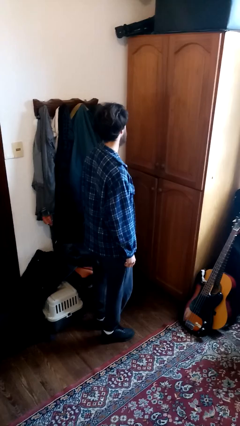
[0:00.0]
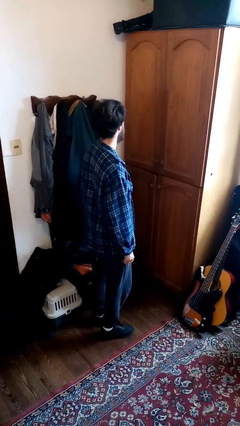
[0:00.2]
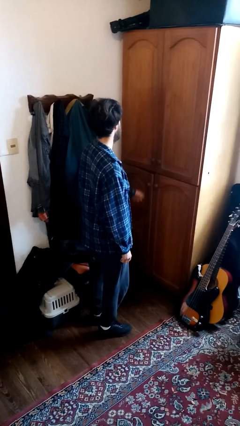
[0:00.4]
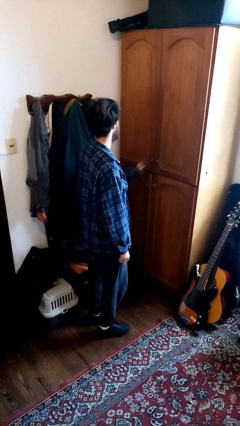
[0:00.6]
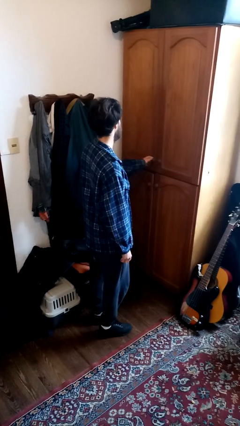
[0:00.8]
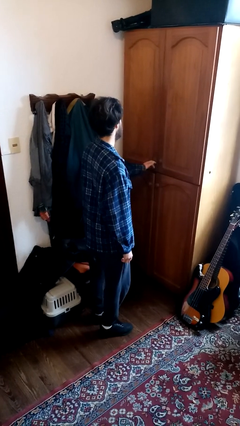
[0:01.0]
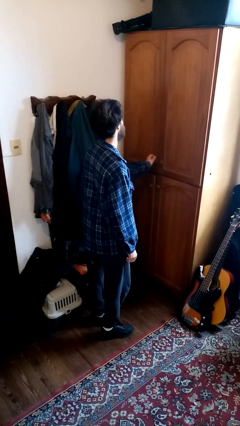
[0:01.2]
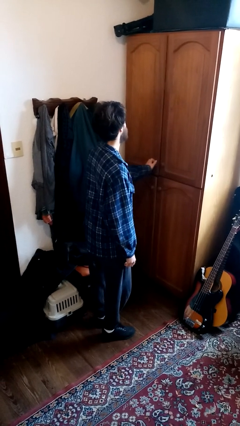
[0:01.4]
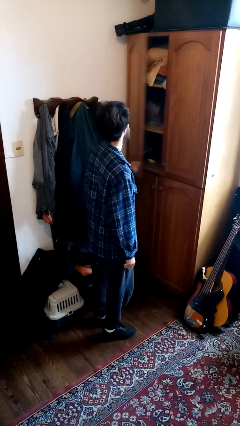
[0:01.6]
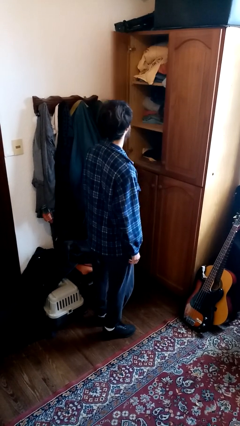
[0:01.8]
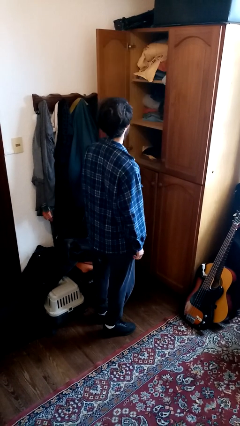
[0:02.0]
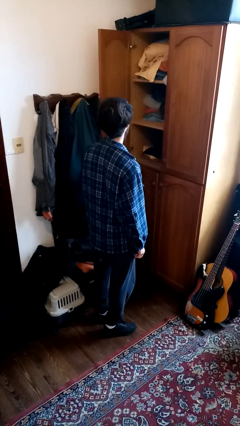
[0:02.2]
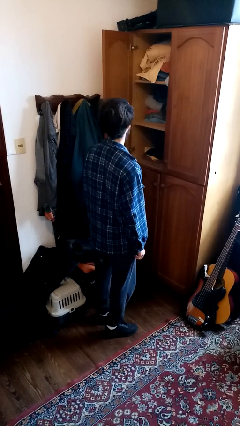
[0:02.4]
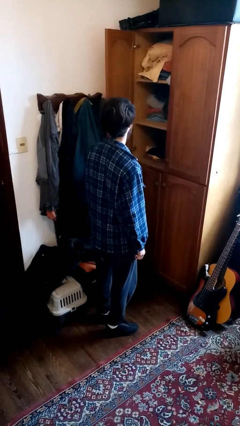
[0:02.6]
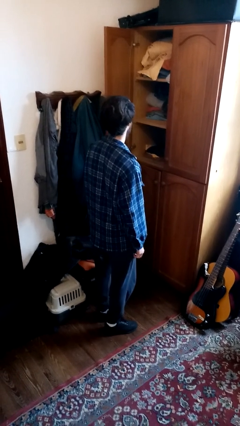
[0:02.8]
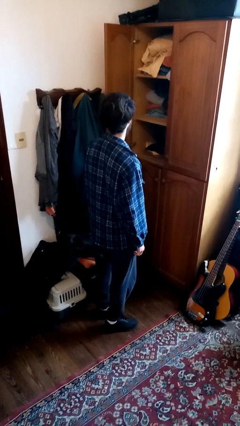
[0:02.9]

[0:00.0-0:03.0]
person opens dresser drawer

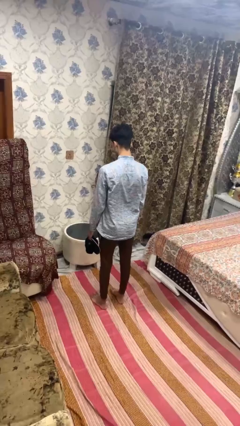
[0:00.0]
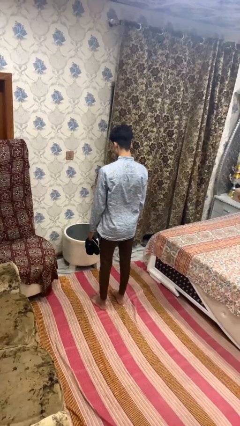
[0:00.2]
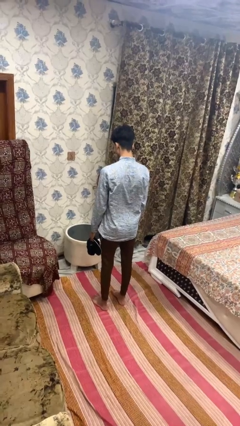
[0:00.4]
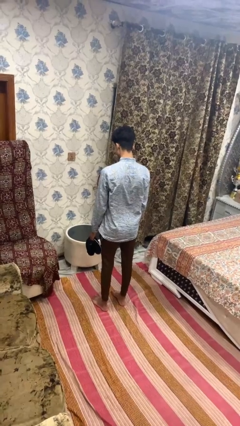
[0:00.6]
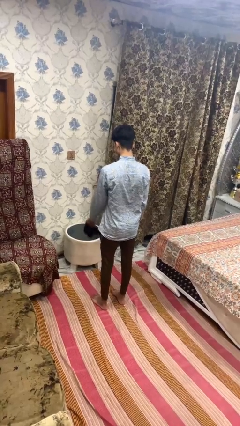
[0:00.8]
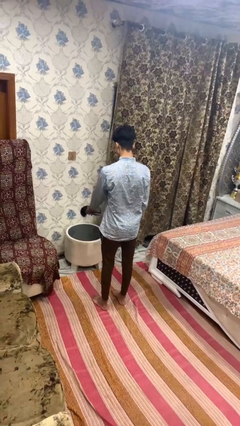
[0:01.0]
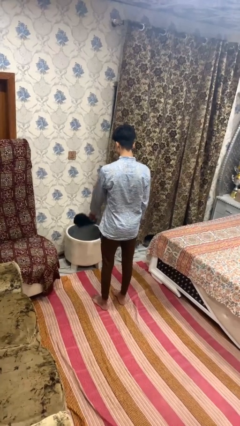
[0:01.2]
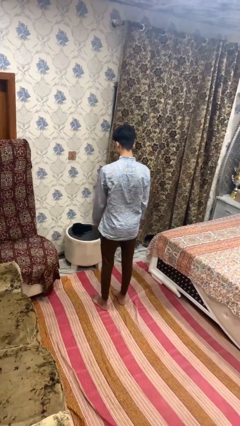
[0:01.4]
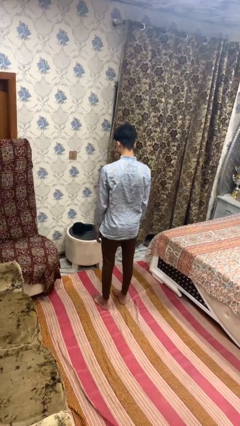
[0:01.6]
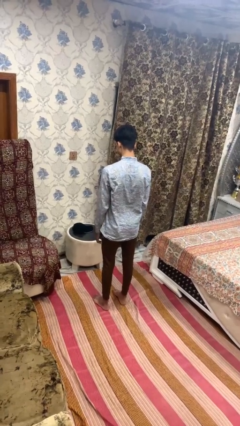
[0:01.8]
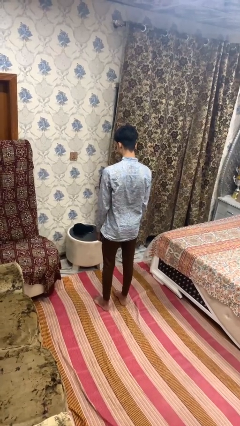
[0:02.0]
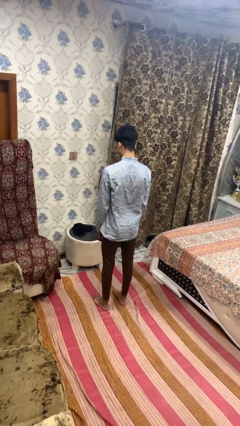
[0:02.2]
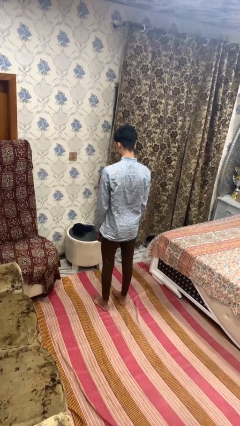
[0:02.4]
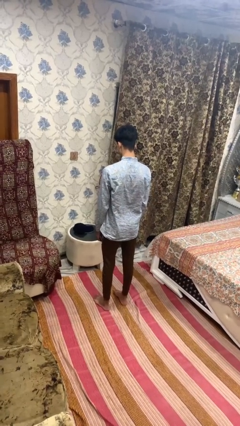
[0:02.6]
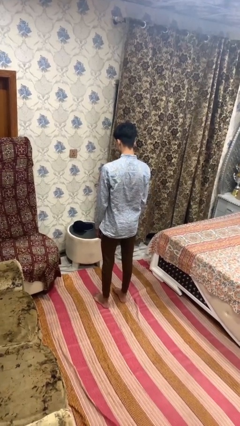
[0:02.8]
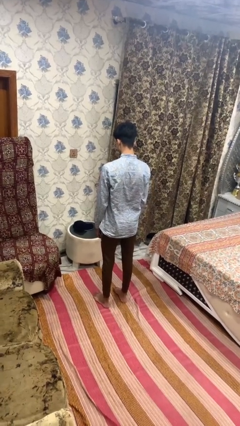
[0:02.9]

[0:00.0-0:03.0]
person throws object on table

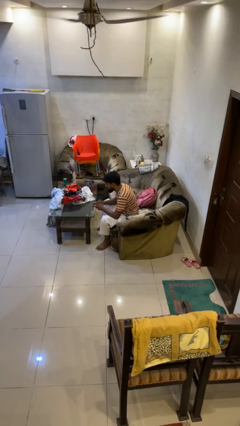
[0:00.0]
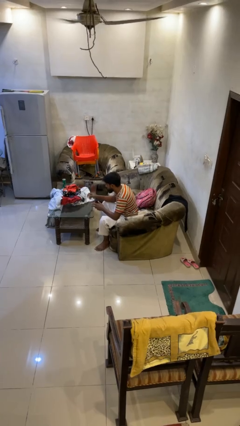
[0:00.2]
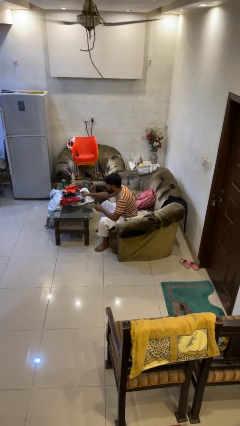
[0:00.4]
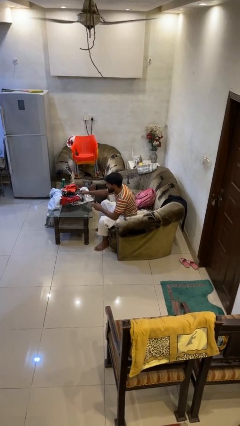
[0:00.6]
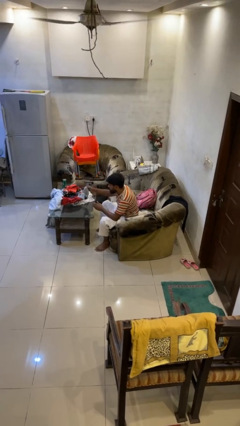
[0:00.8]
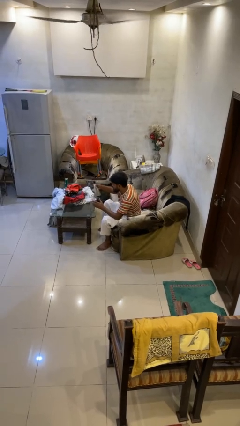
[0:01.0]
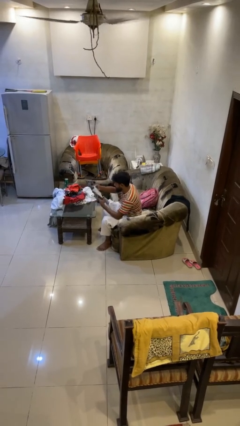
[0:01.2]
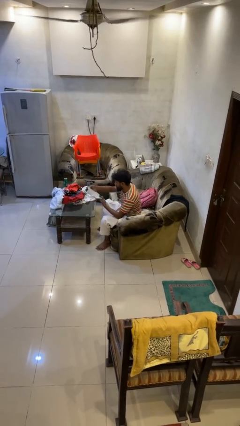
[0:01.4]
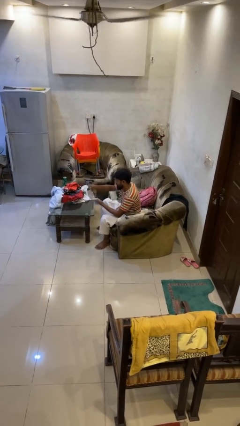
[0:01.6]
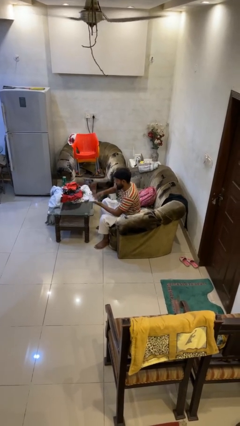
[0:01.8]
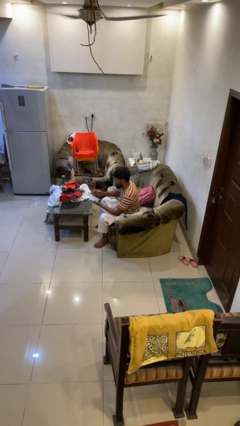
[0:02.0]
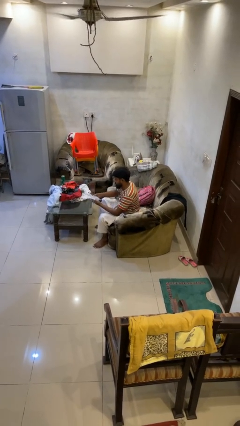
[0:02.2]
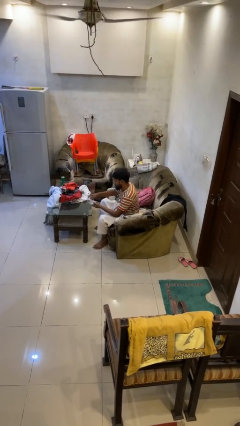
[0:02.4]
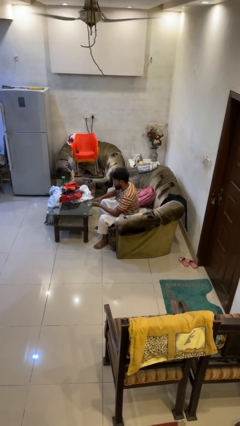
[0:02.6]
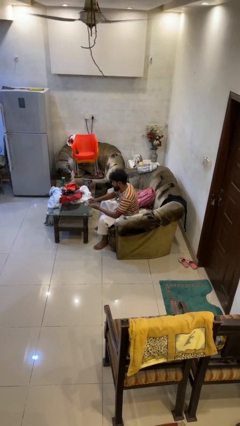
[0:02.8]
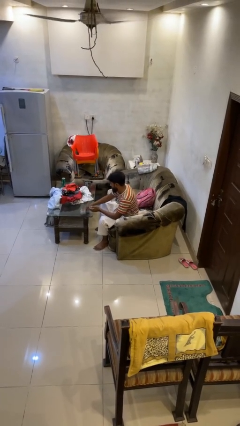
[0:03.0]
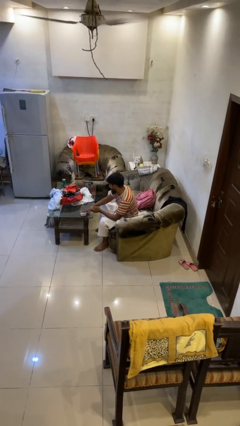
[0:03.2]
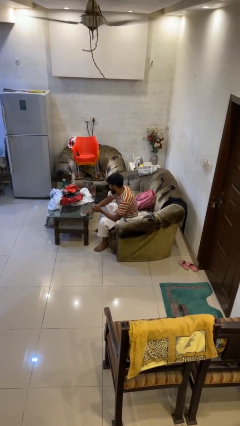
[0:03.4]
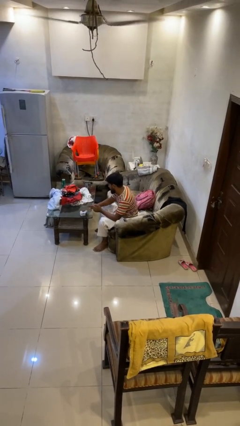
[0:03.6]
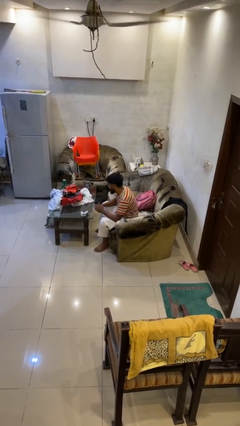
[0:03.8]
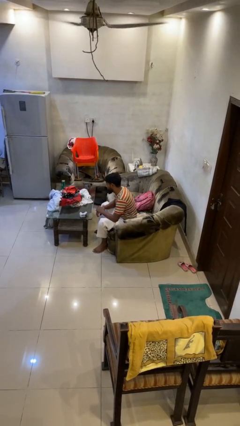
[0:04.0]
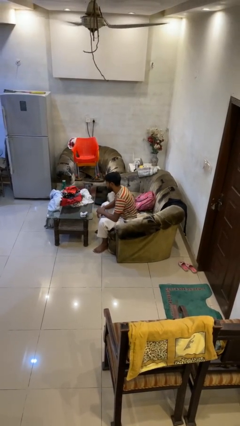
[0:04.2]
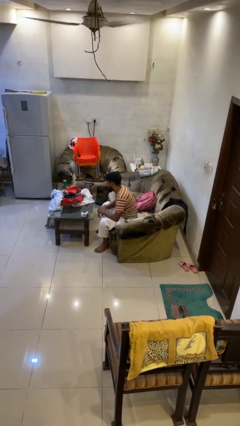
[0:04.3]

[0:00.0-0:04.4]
person folds socks

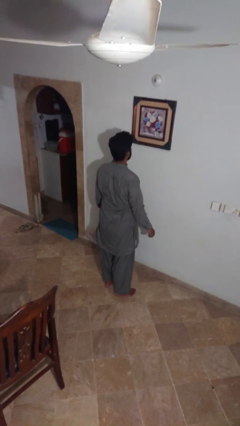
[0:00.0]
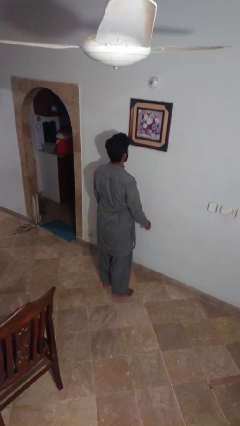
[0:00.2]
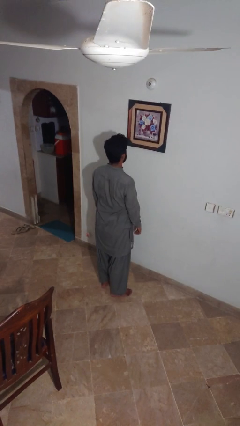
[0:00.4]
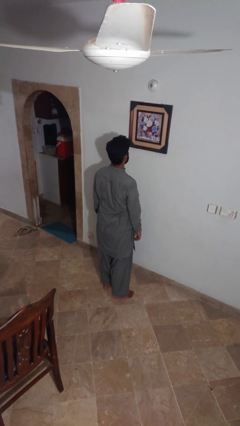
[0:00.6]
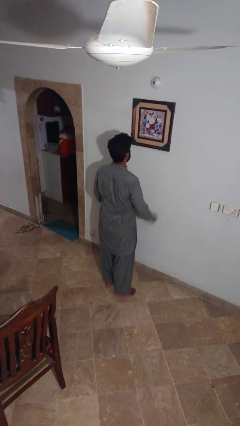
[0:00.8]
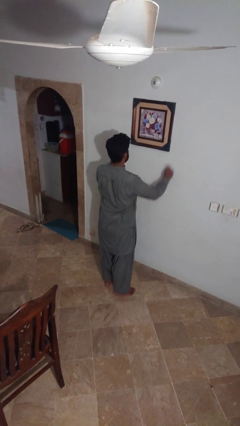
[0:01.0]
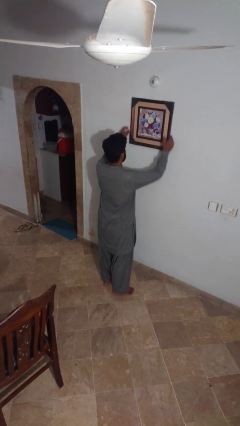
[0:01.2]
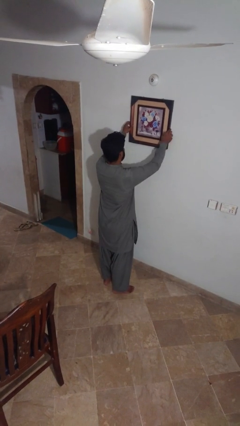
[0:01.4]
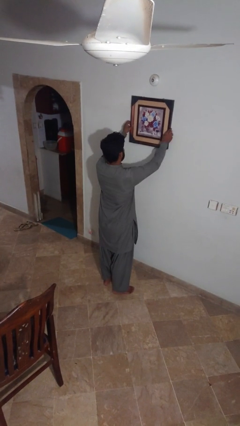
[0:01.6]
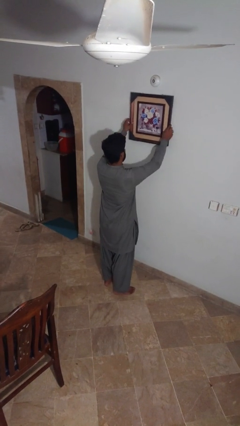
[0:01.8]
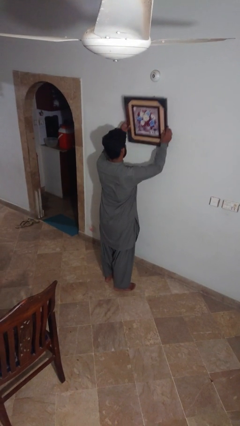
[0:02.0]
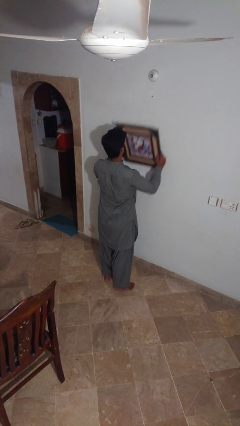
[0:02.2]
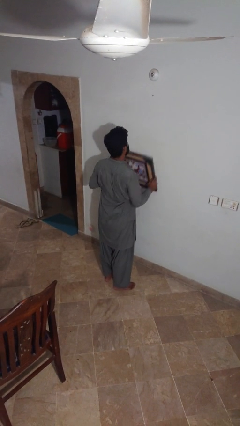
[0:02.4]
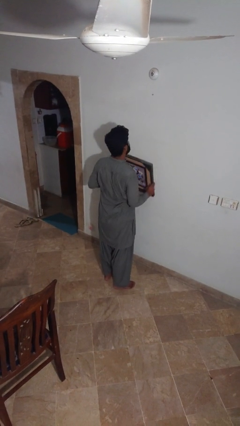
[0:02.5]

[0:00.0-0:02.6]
person takes down picture frame

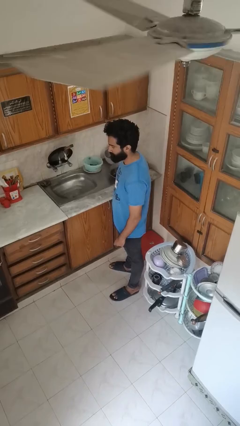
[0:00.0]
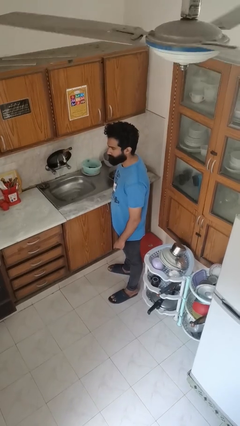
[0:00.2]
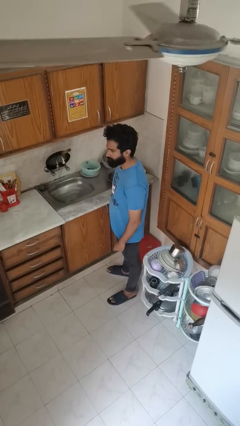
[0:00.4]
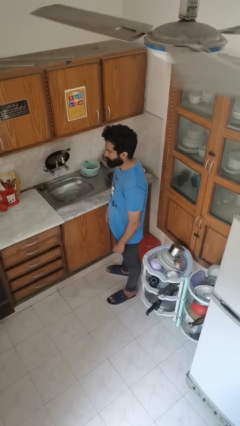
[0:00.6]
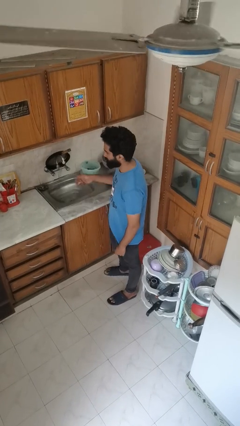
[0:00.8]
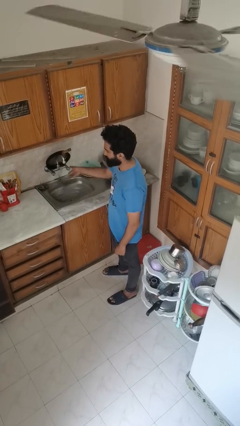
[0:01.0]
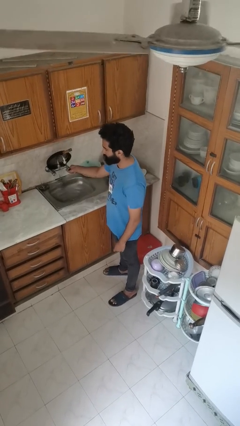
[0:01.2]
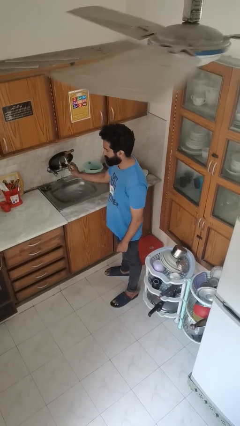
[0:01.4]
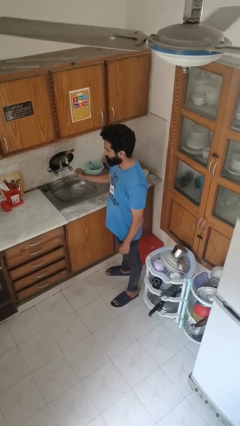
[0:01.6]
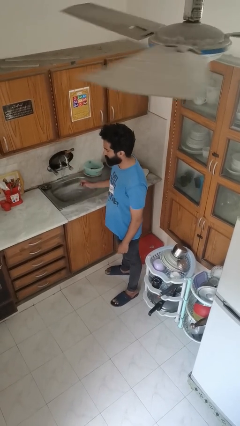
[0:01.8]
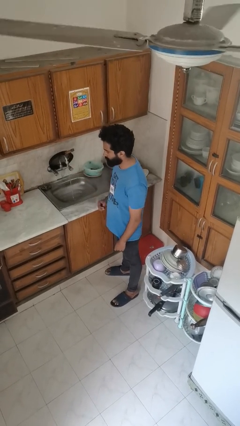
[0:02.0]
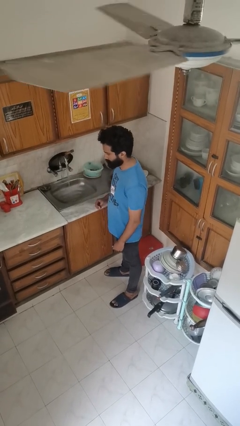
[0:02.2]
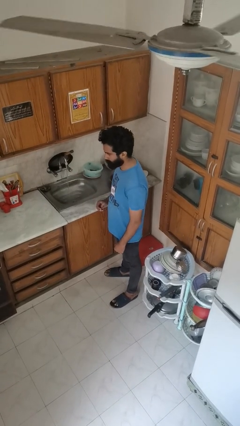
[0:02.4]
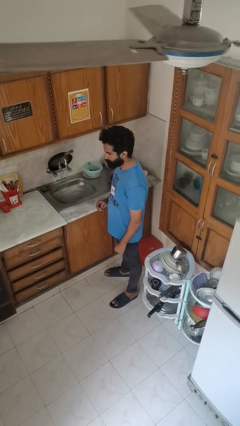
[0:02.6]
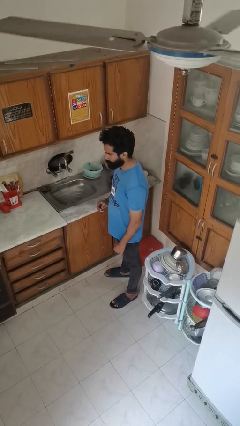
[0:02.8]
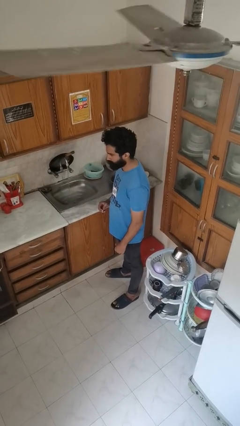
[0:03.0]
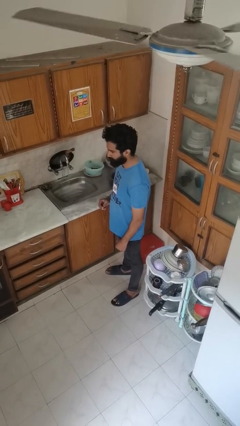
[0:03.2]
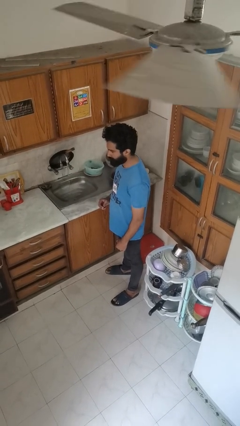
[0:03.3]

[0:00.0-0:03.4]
person turns on faucet

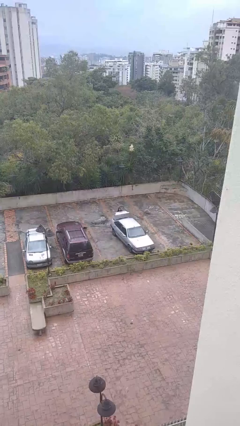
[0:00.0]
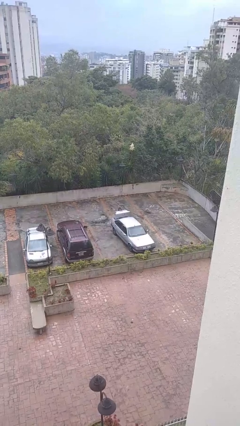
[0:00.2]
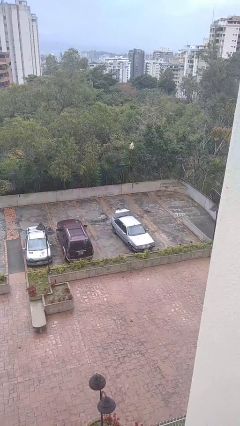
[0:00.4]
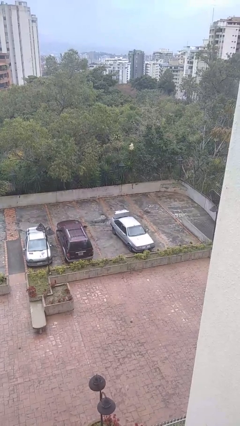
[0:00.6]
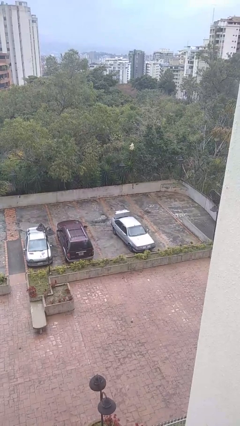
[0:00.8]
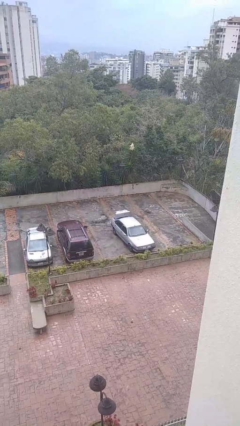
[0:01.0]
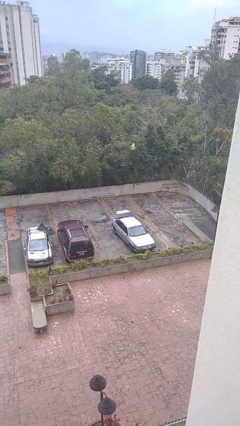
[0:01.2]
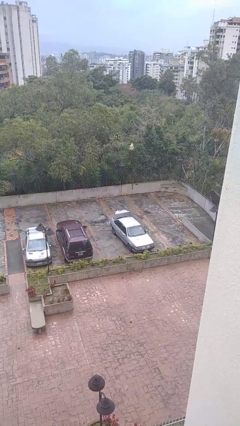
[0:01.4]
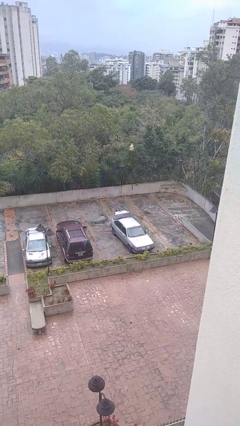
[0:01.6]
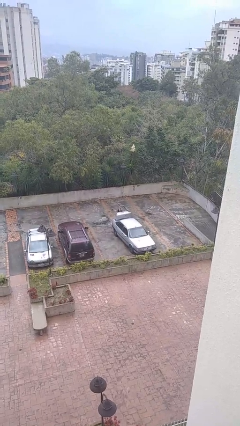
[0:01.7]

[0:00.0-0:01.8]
person unloads car
